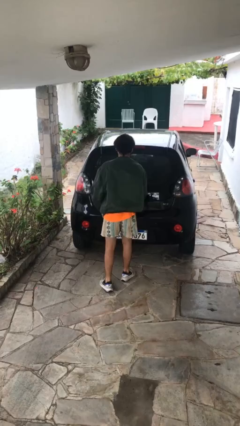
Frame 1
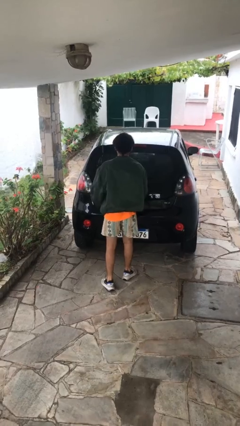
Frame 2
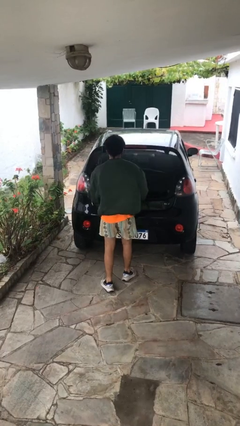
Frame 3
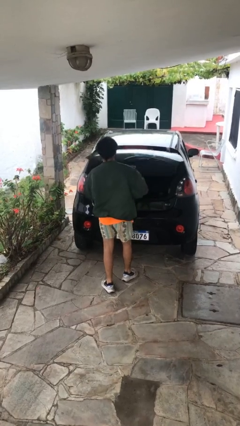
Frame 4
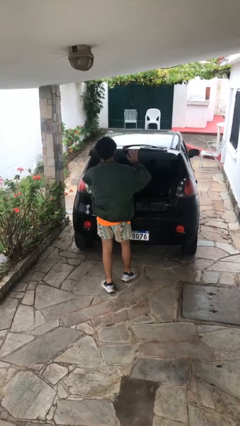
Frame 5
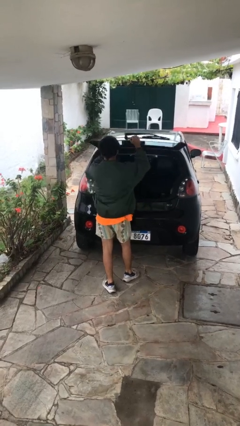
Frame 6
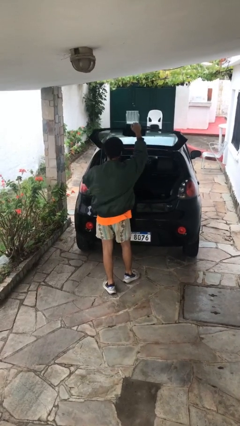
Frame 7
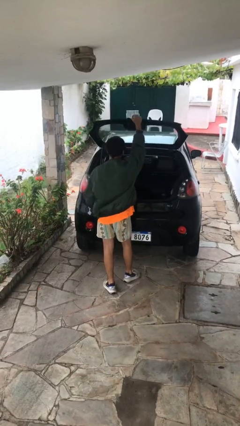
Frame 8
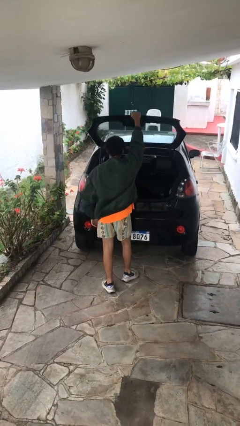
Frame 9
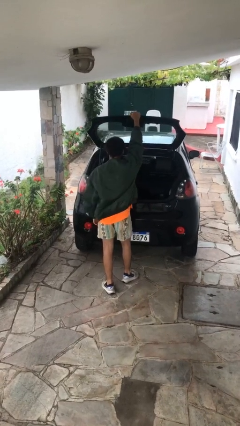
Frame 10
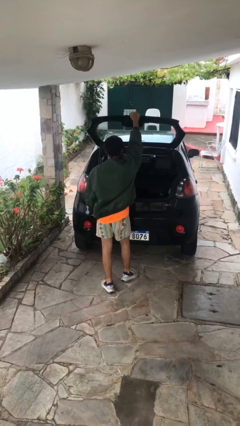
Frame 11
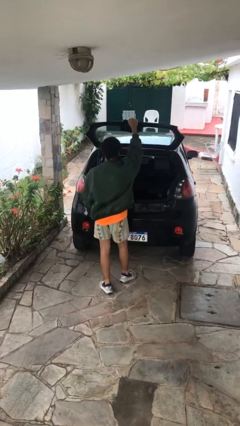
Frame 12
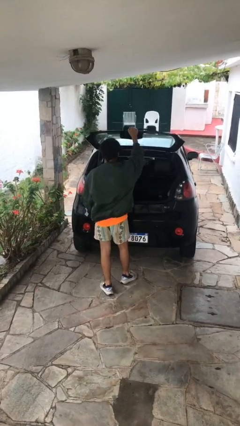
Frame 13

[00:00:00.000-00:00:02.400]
person opens car trunk

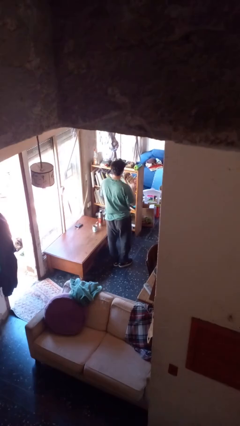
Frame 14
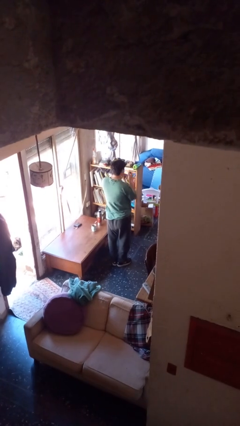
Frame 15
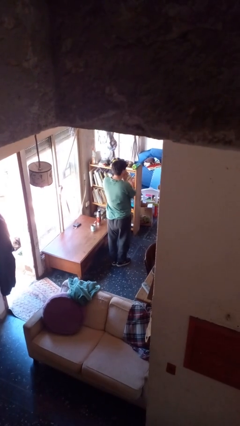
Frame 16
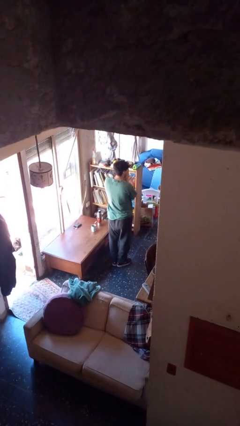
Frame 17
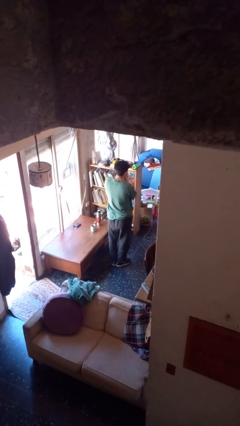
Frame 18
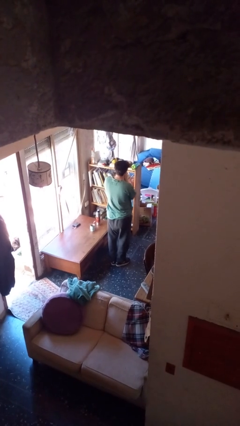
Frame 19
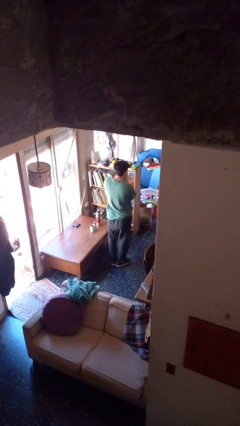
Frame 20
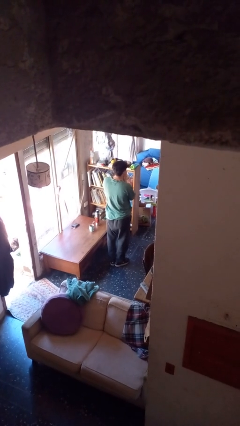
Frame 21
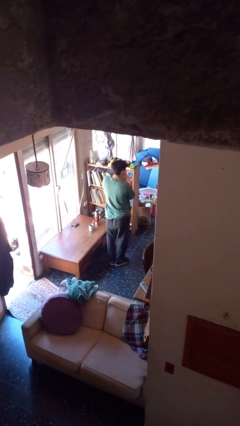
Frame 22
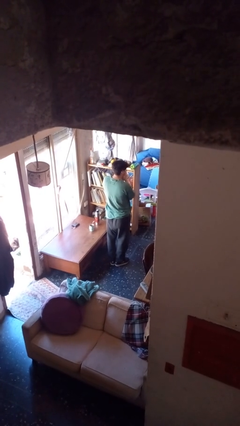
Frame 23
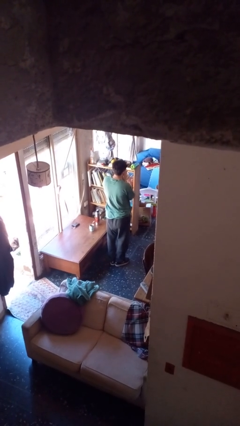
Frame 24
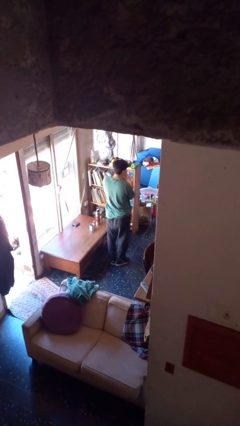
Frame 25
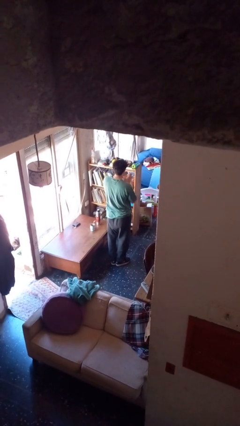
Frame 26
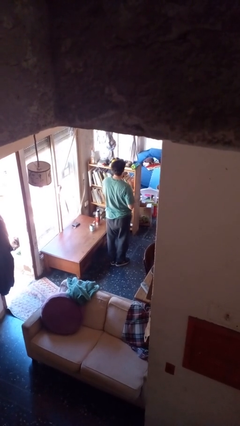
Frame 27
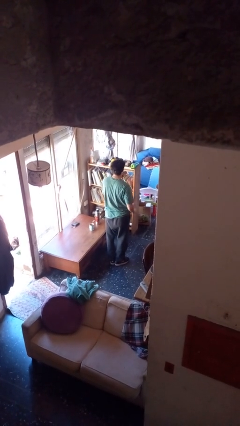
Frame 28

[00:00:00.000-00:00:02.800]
person blows nose

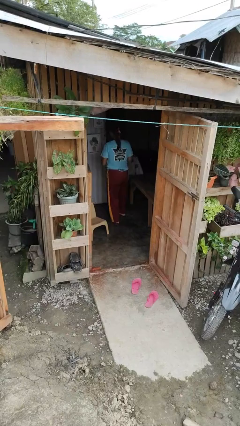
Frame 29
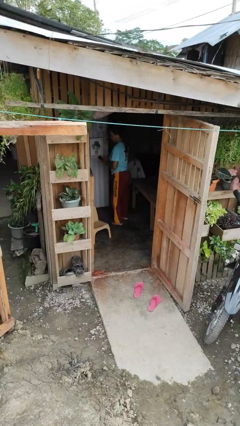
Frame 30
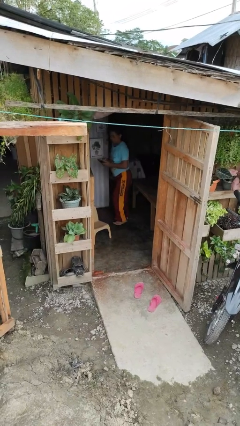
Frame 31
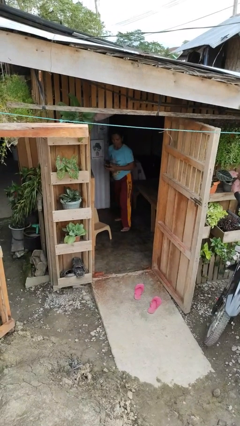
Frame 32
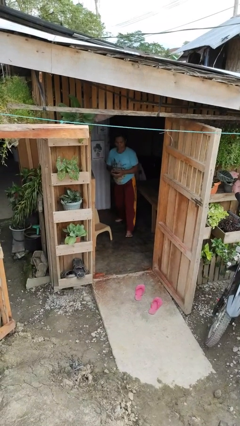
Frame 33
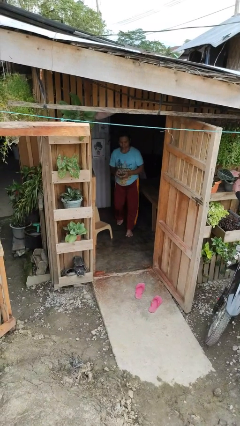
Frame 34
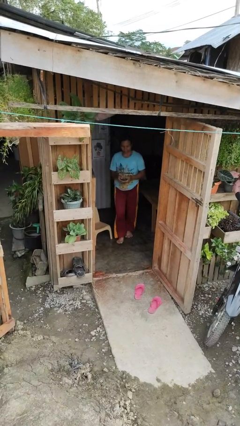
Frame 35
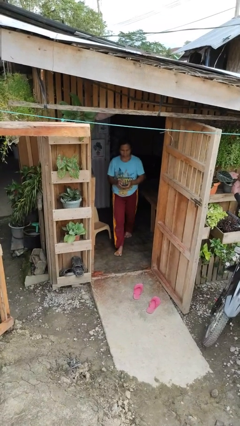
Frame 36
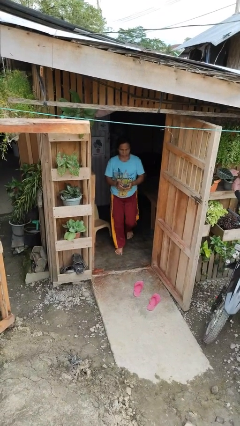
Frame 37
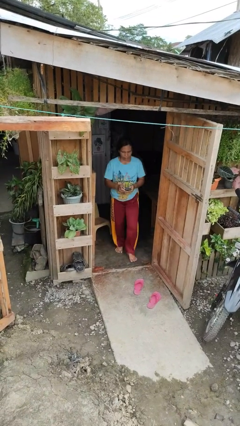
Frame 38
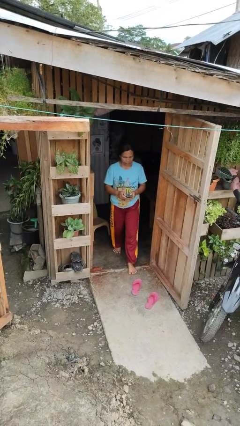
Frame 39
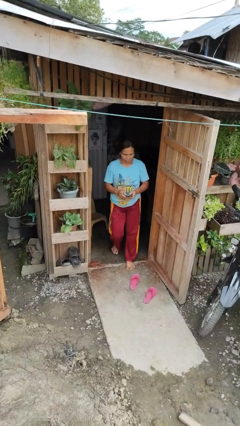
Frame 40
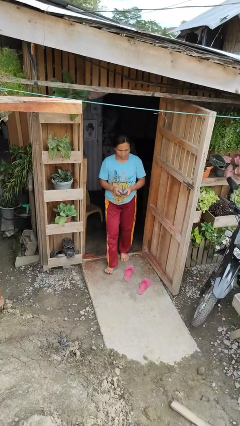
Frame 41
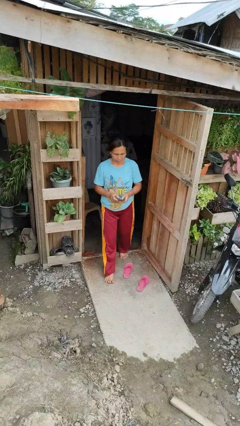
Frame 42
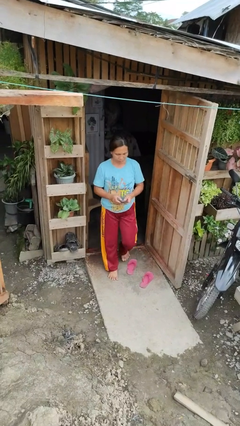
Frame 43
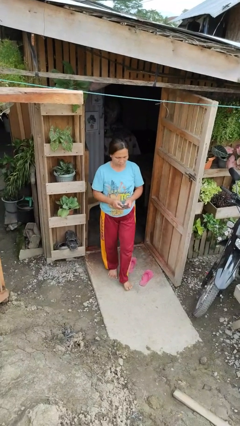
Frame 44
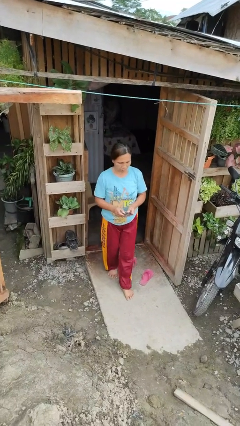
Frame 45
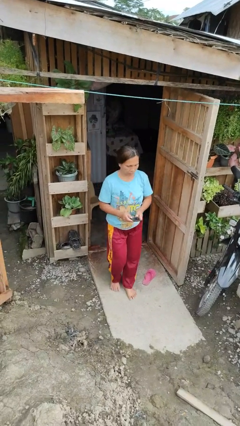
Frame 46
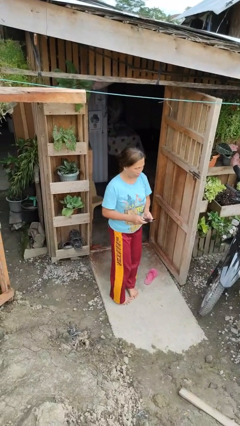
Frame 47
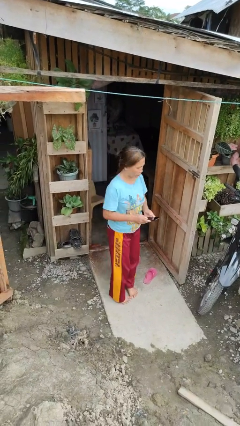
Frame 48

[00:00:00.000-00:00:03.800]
person enters scene through structure

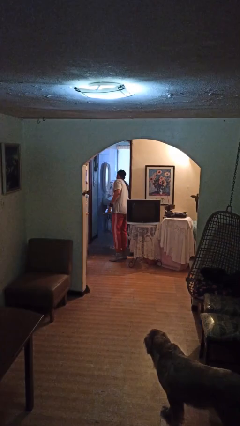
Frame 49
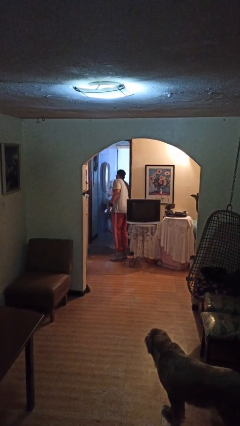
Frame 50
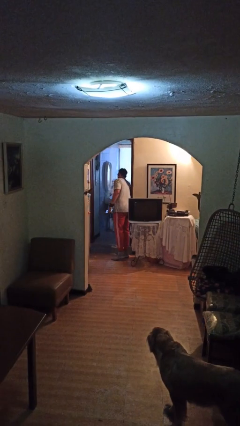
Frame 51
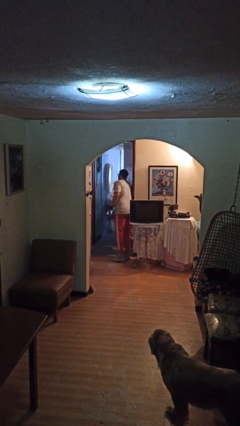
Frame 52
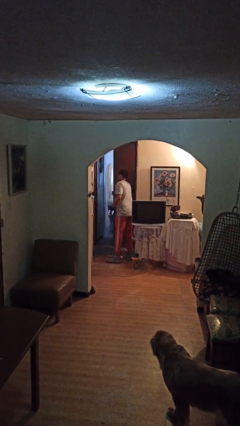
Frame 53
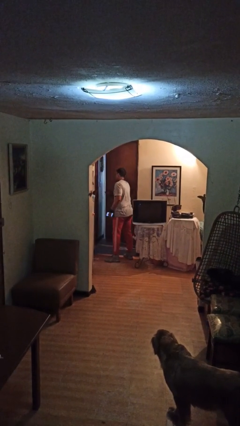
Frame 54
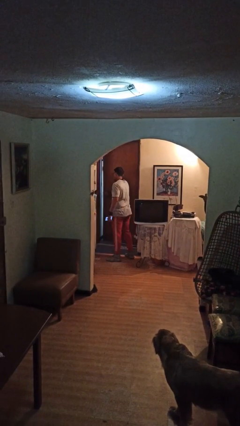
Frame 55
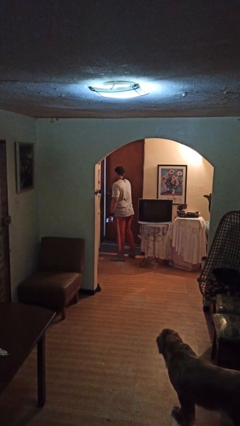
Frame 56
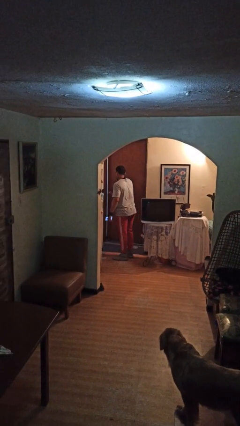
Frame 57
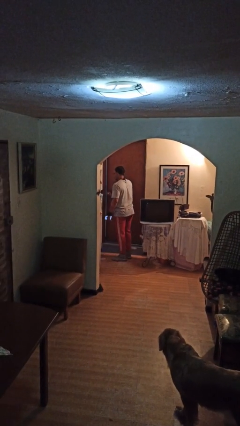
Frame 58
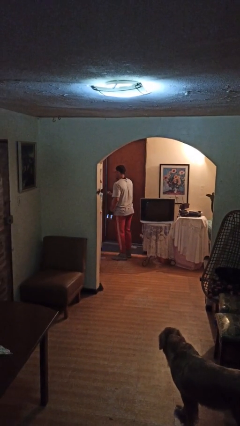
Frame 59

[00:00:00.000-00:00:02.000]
person closes facility door

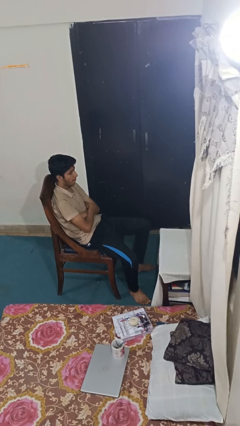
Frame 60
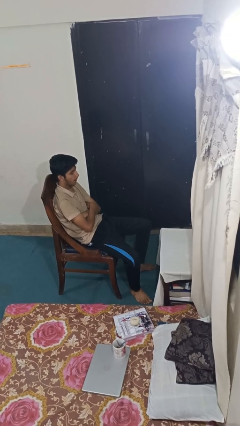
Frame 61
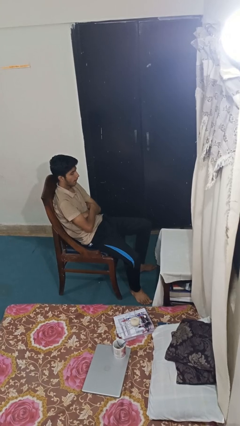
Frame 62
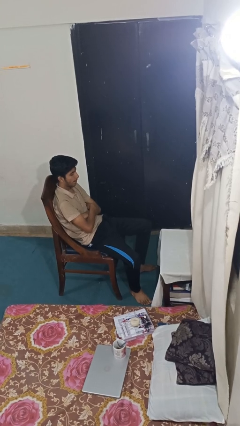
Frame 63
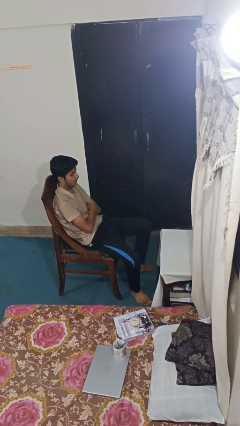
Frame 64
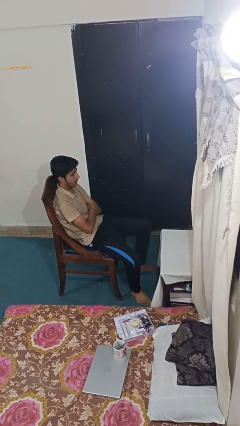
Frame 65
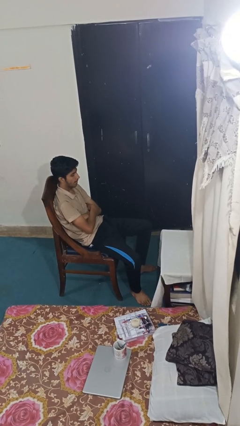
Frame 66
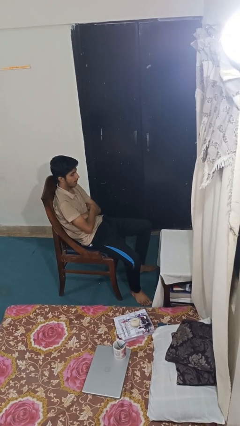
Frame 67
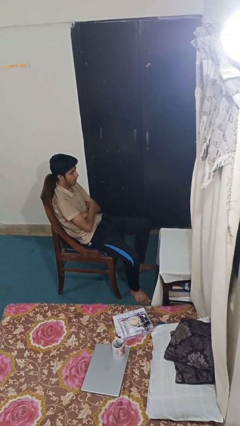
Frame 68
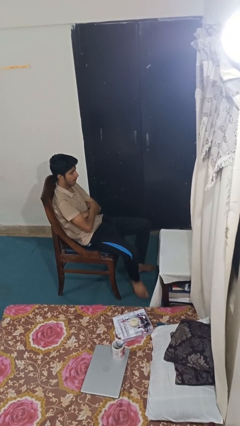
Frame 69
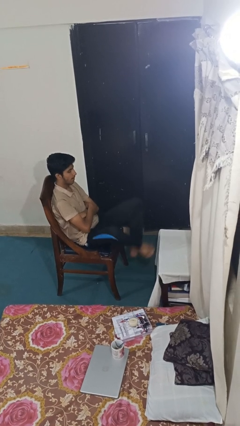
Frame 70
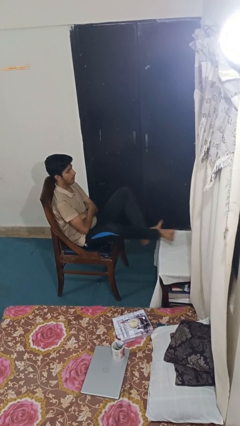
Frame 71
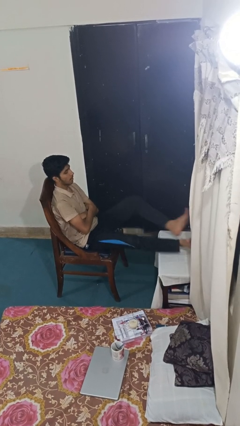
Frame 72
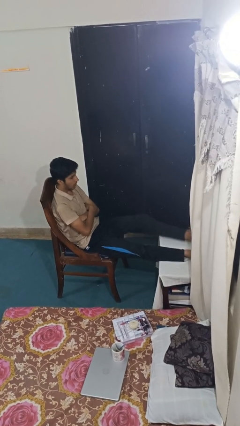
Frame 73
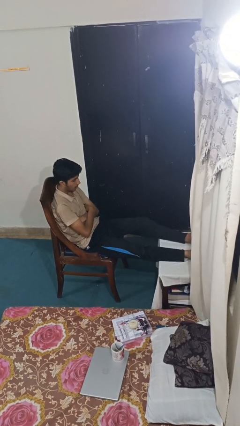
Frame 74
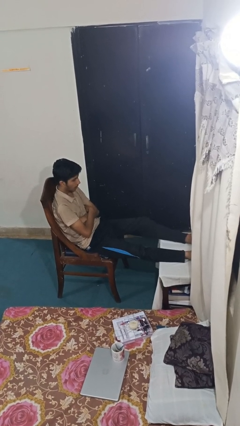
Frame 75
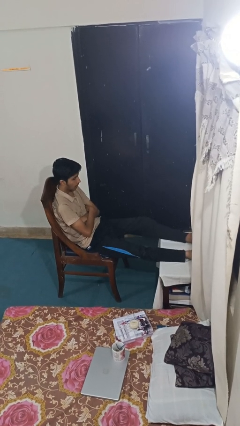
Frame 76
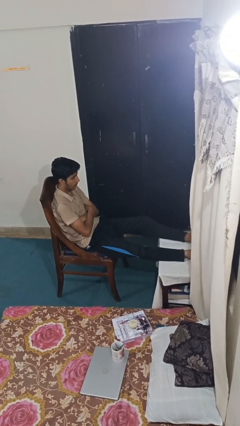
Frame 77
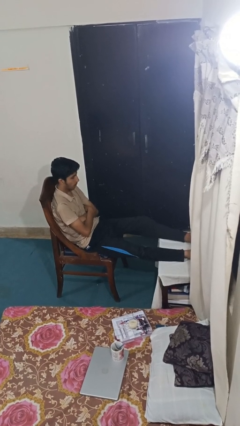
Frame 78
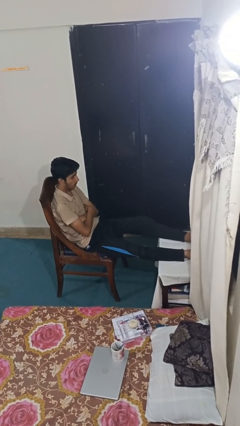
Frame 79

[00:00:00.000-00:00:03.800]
person puts feet up

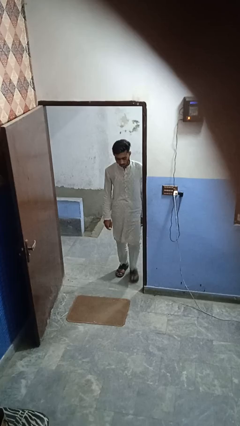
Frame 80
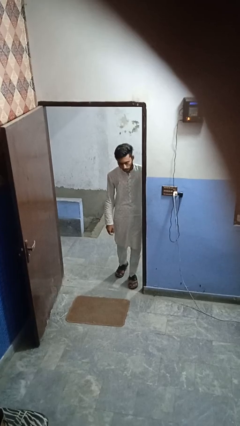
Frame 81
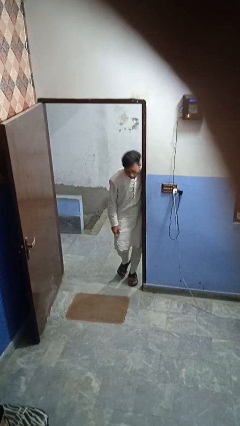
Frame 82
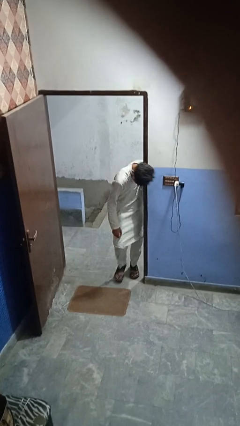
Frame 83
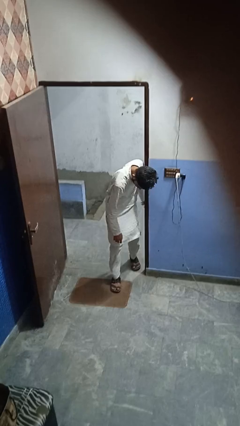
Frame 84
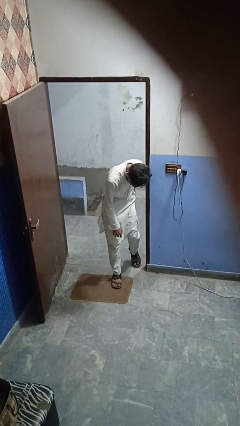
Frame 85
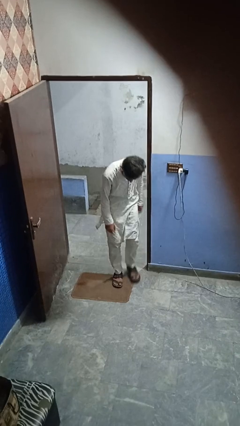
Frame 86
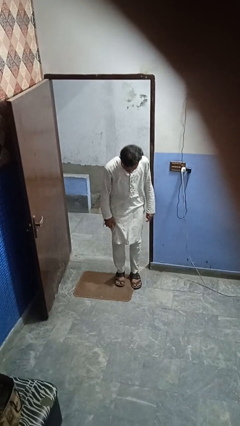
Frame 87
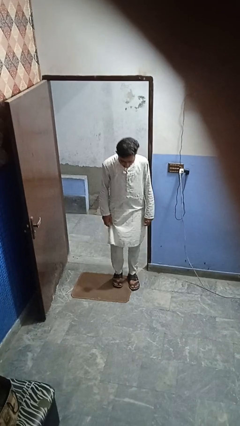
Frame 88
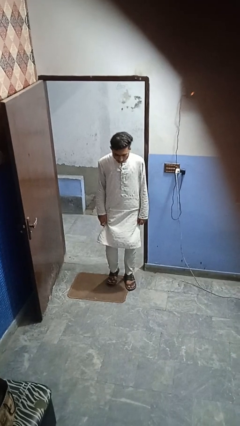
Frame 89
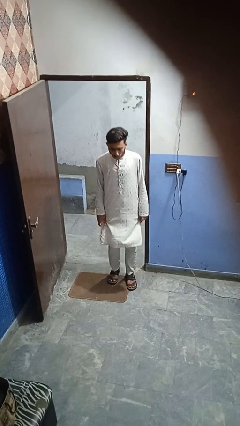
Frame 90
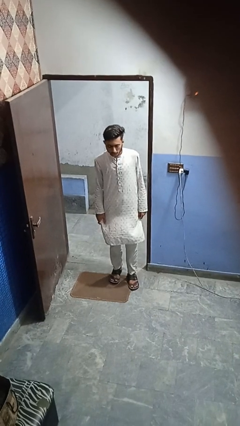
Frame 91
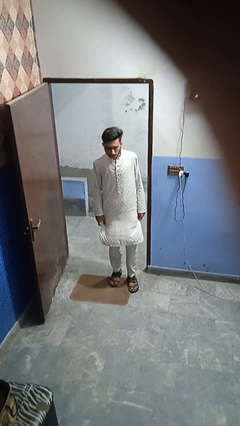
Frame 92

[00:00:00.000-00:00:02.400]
person bumps into wall

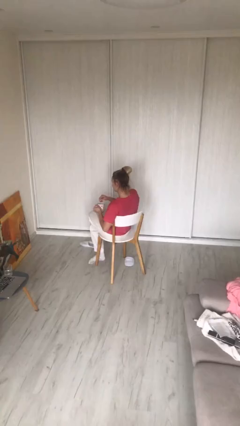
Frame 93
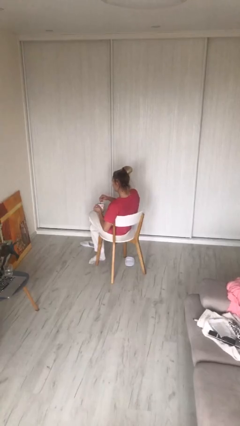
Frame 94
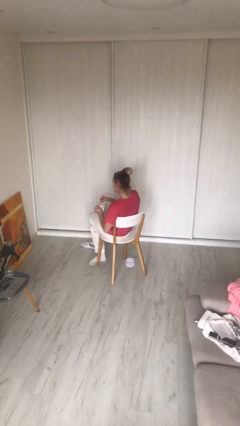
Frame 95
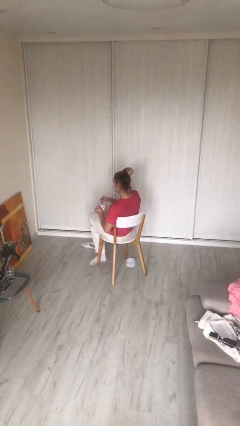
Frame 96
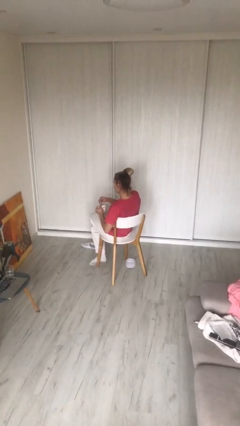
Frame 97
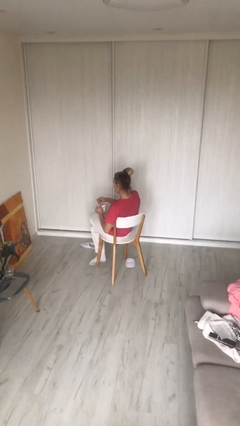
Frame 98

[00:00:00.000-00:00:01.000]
person stirs mug
